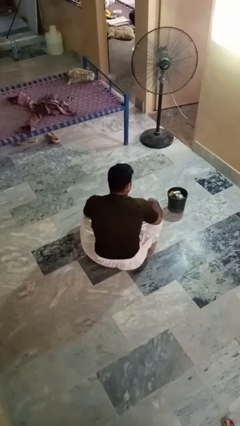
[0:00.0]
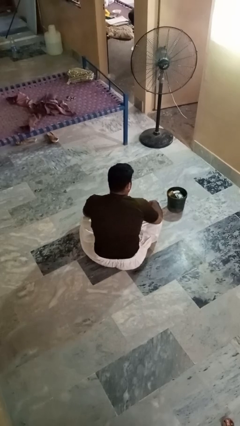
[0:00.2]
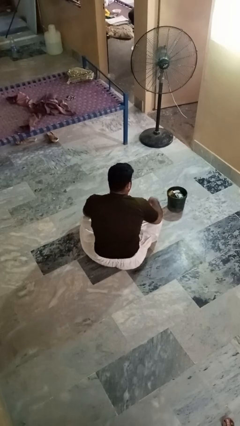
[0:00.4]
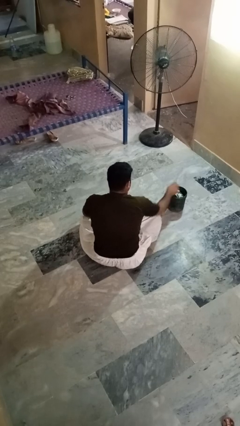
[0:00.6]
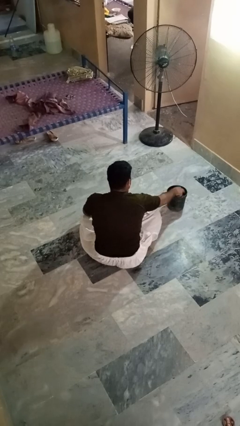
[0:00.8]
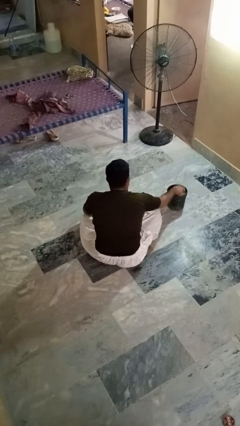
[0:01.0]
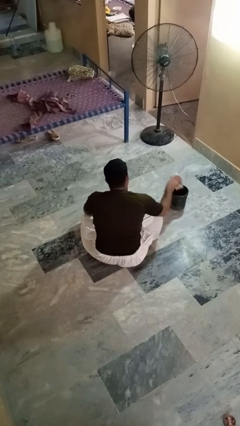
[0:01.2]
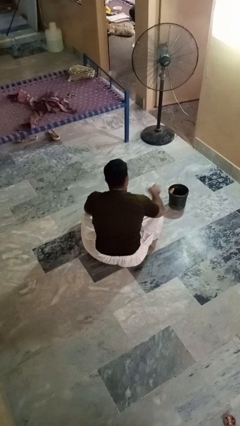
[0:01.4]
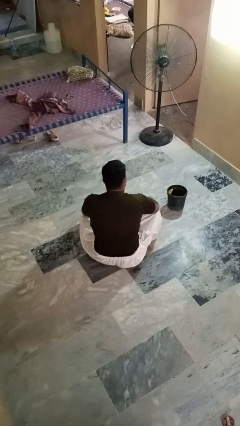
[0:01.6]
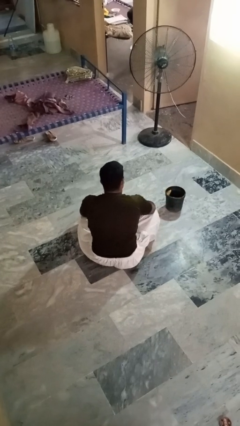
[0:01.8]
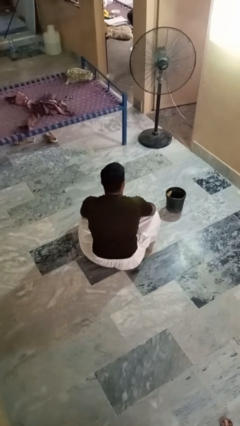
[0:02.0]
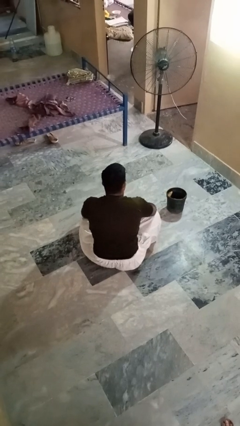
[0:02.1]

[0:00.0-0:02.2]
person takes object from basket

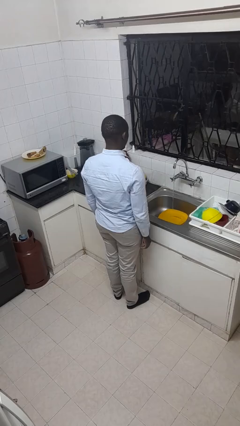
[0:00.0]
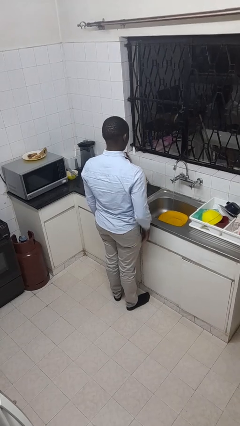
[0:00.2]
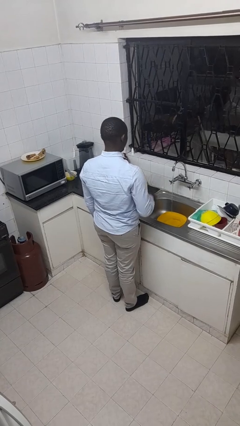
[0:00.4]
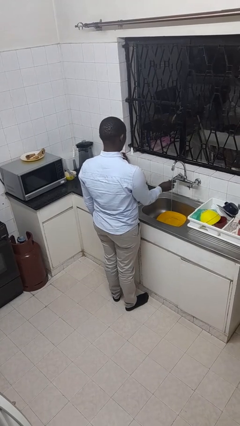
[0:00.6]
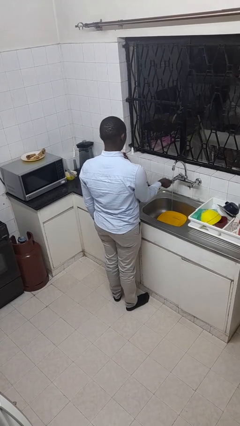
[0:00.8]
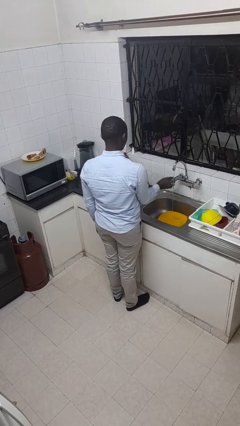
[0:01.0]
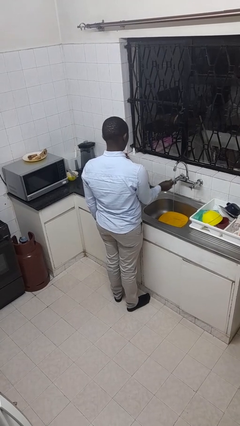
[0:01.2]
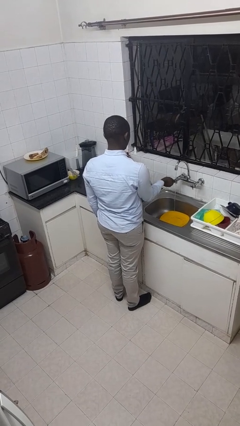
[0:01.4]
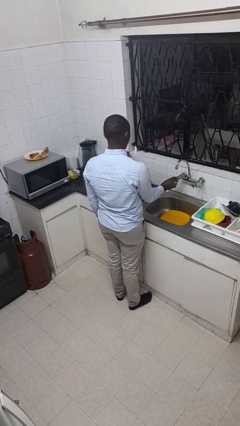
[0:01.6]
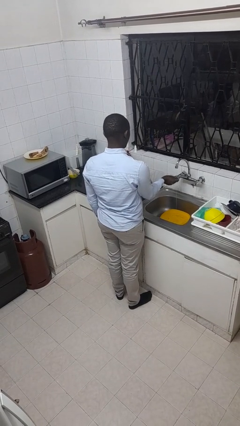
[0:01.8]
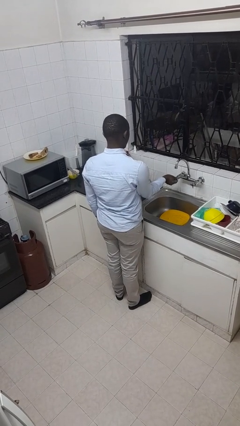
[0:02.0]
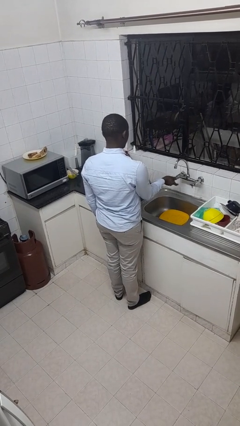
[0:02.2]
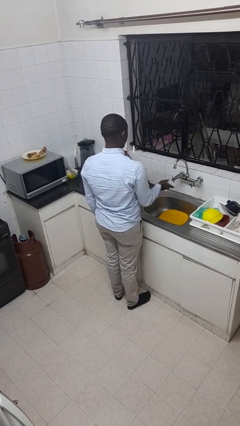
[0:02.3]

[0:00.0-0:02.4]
person turns off faucet

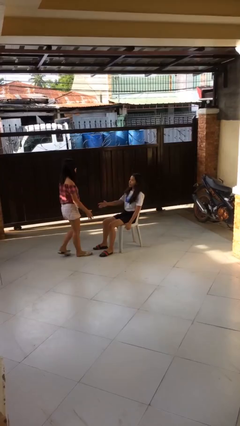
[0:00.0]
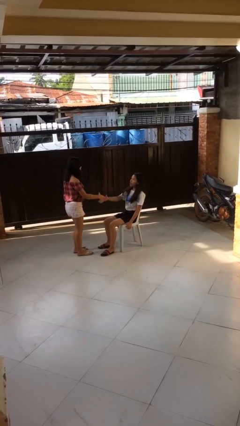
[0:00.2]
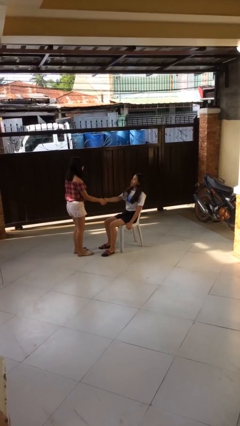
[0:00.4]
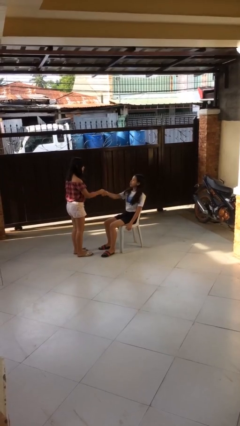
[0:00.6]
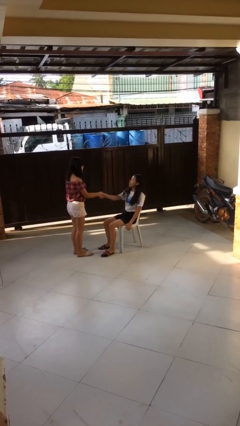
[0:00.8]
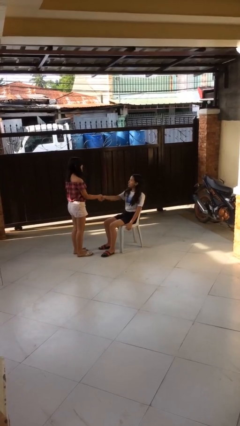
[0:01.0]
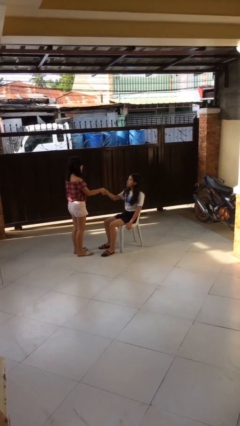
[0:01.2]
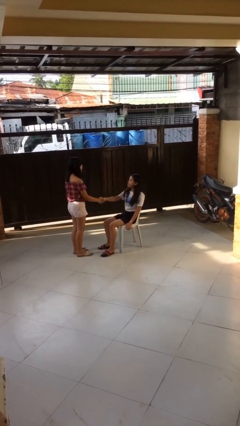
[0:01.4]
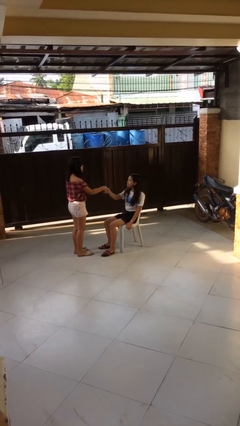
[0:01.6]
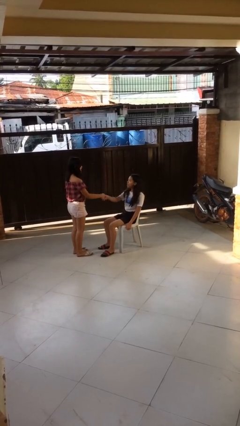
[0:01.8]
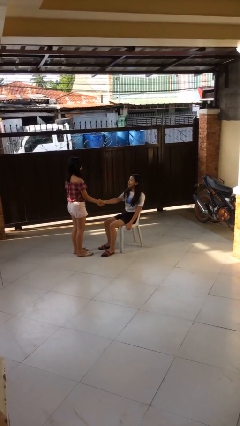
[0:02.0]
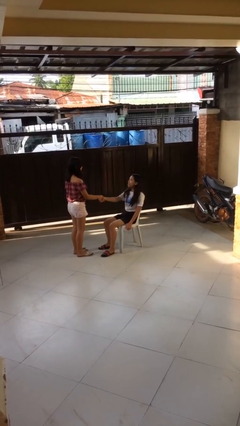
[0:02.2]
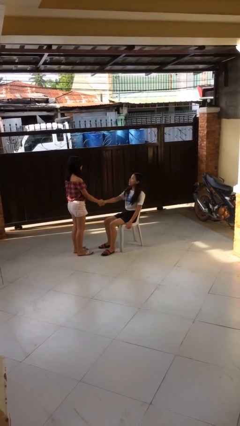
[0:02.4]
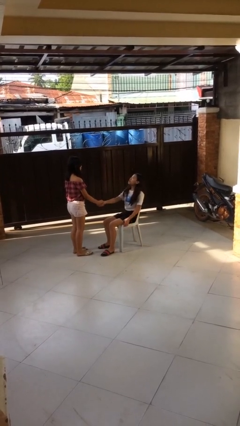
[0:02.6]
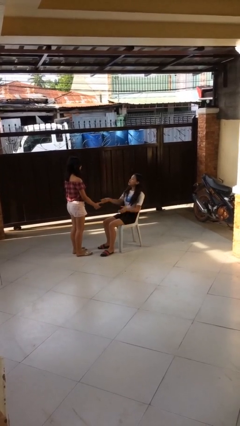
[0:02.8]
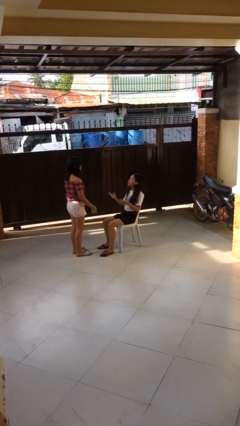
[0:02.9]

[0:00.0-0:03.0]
person shakes hand

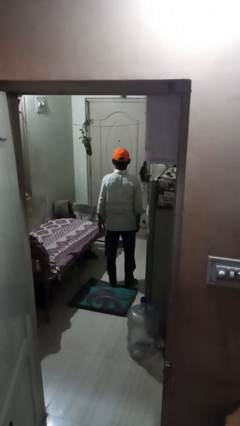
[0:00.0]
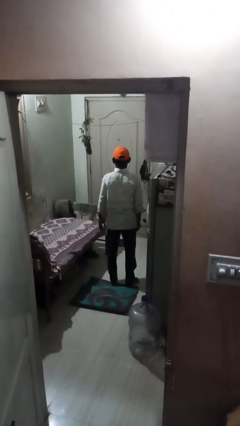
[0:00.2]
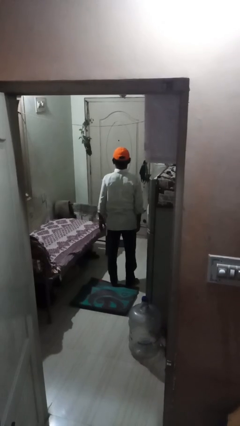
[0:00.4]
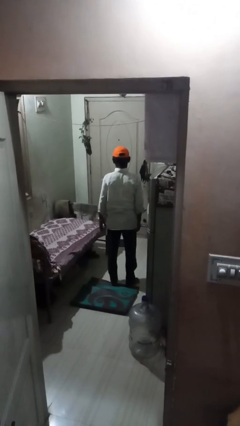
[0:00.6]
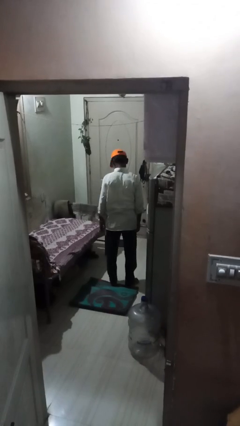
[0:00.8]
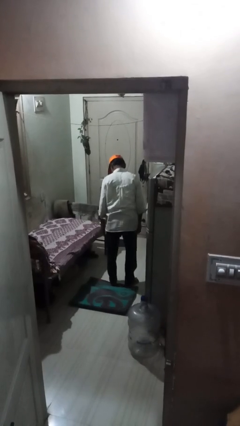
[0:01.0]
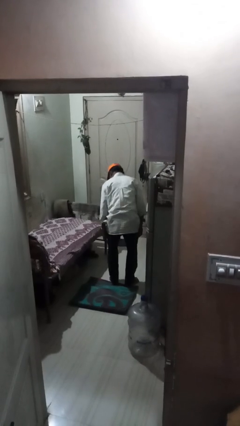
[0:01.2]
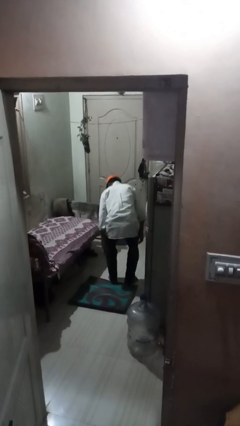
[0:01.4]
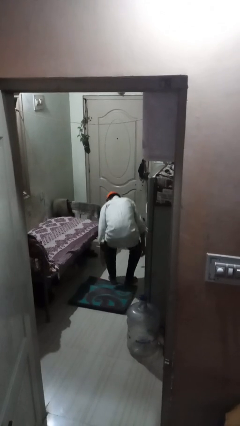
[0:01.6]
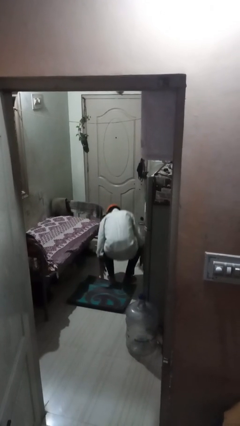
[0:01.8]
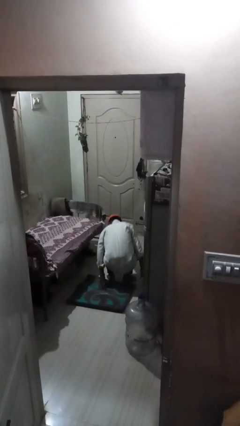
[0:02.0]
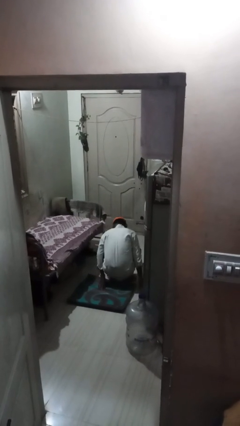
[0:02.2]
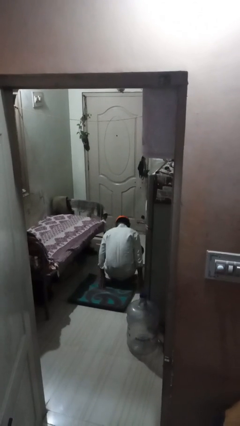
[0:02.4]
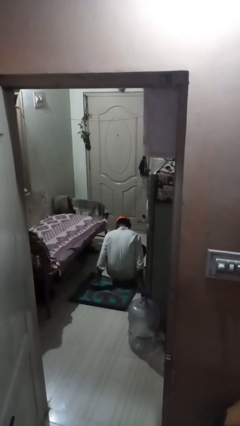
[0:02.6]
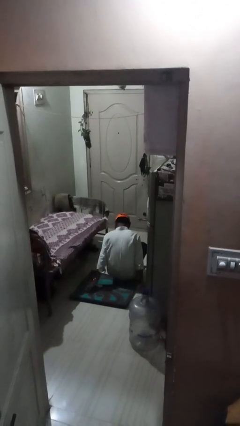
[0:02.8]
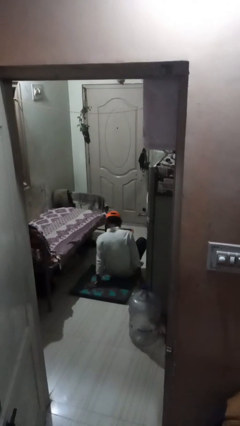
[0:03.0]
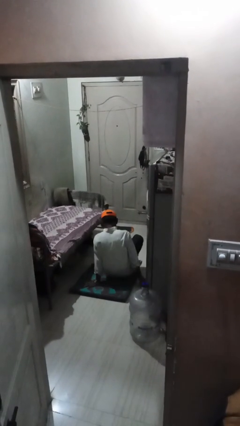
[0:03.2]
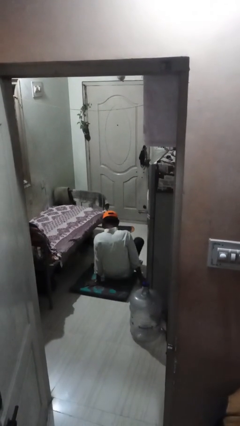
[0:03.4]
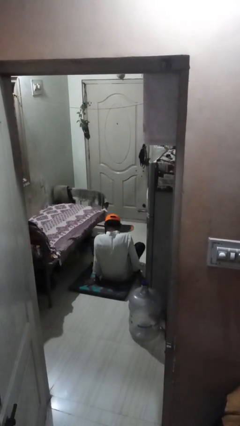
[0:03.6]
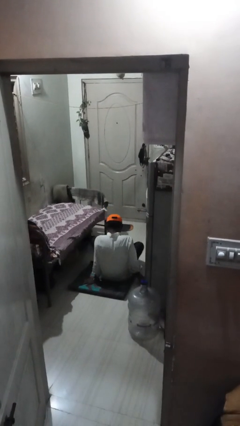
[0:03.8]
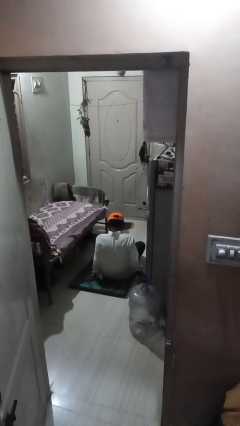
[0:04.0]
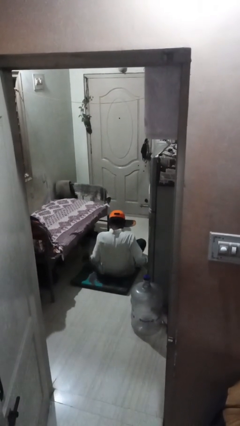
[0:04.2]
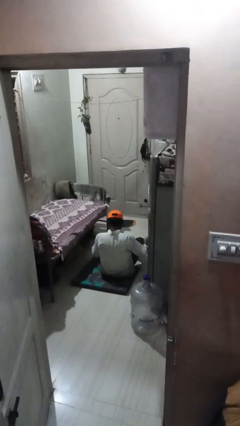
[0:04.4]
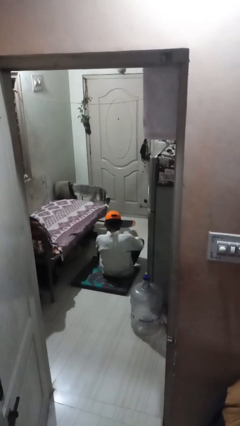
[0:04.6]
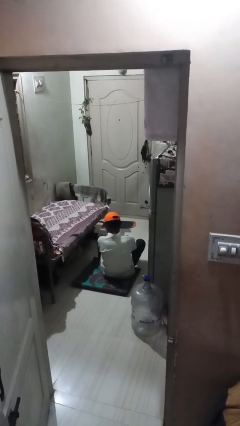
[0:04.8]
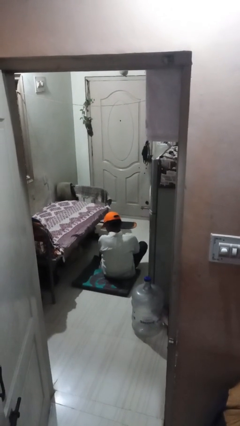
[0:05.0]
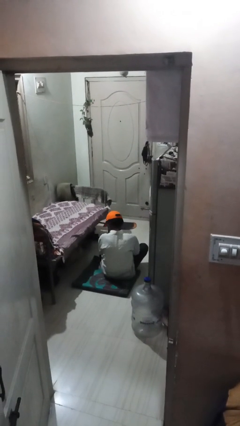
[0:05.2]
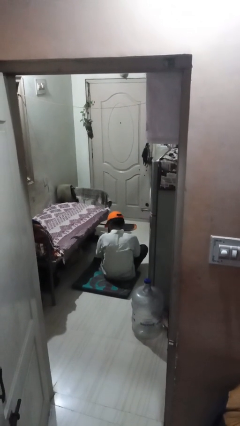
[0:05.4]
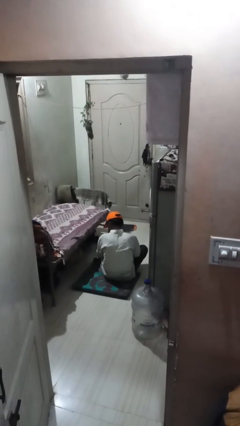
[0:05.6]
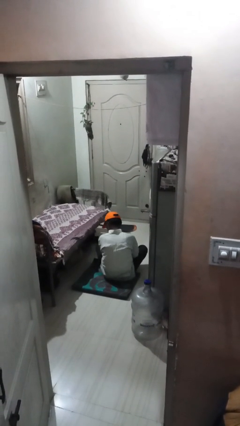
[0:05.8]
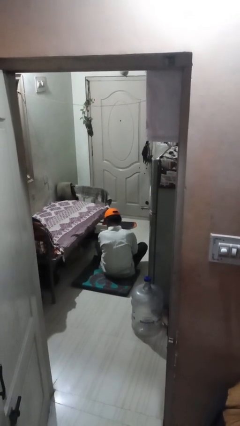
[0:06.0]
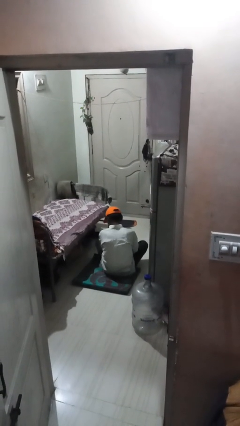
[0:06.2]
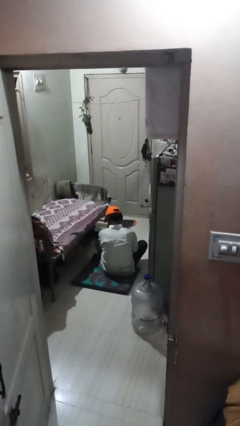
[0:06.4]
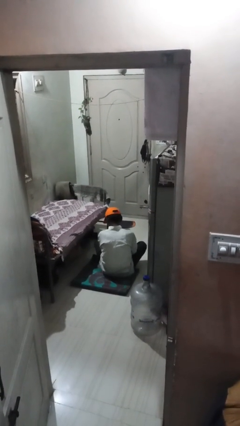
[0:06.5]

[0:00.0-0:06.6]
person sits crisscross

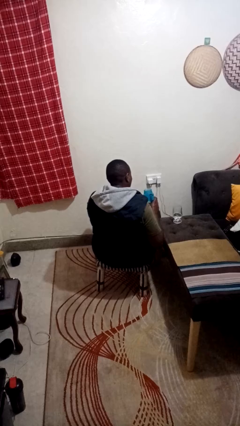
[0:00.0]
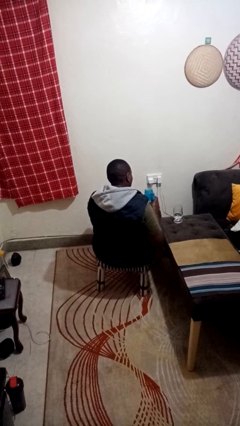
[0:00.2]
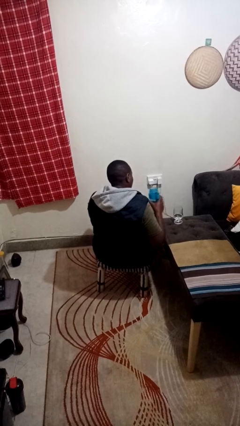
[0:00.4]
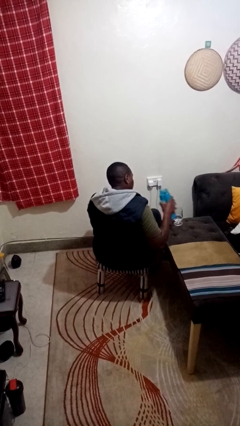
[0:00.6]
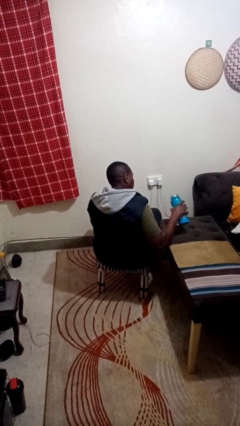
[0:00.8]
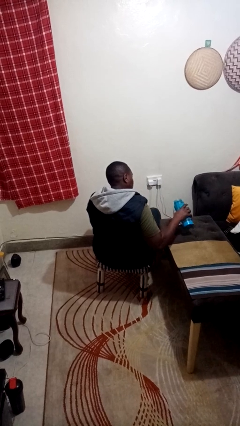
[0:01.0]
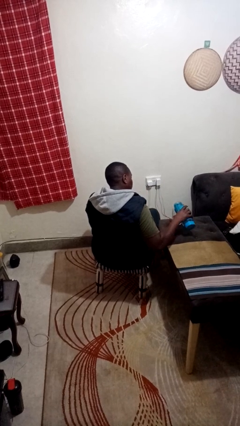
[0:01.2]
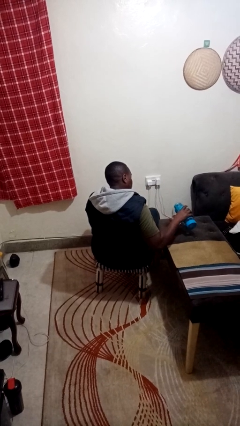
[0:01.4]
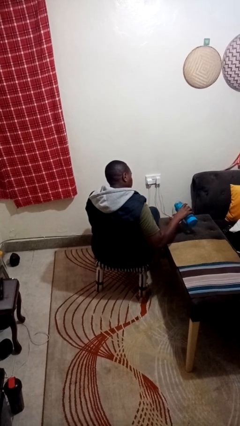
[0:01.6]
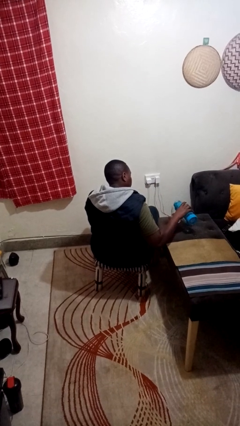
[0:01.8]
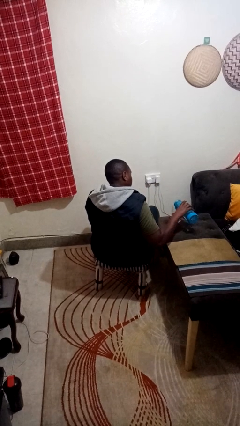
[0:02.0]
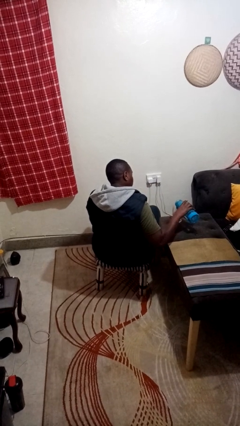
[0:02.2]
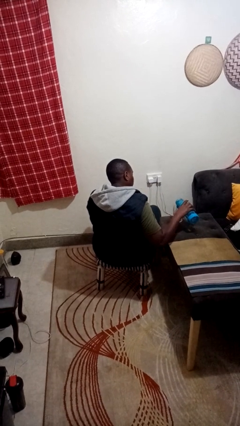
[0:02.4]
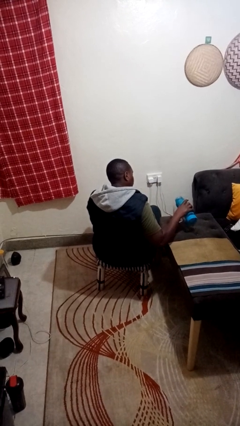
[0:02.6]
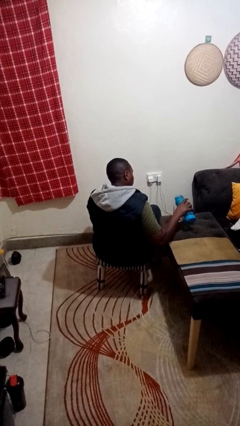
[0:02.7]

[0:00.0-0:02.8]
person pours liquid into cup

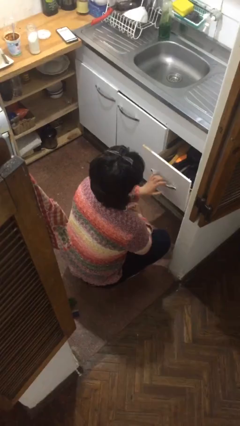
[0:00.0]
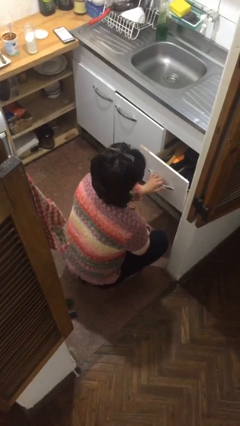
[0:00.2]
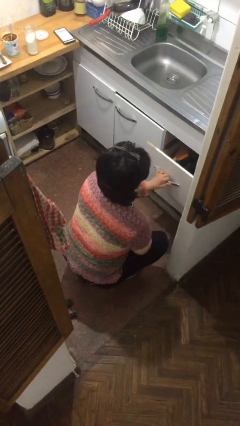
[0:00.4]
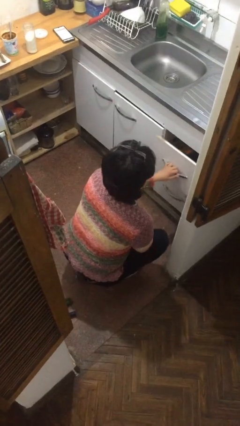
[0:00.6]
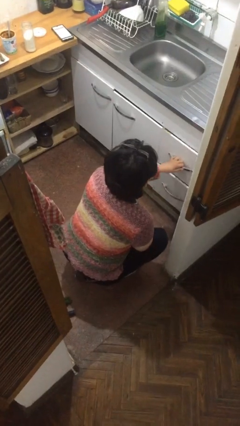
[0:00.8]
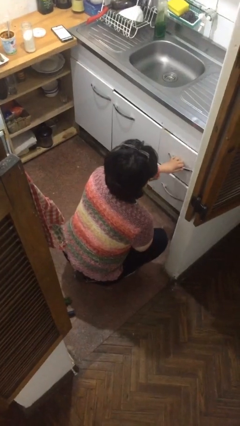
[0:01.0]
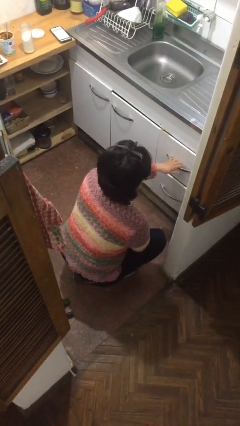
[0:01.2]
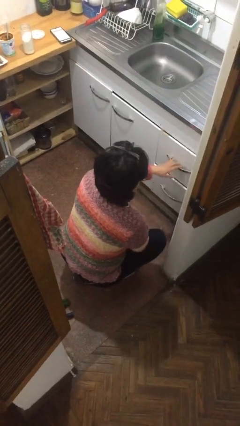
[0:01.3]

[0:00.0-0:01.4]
person closes kitchen drawer
